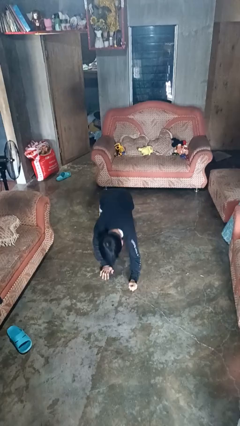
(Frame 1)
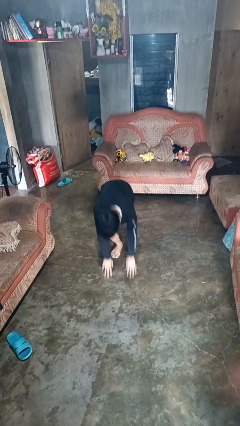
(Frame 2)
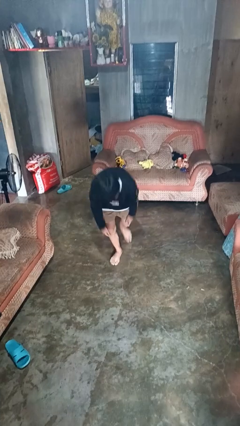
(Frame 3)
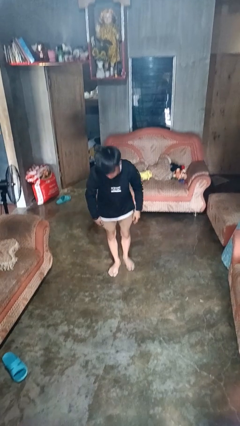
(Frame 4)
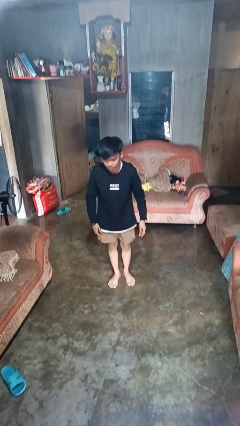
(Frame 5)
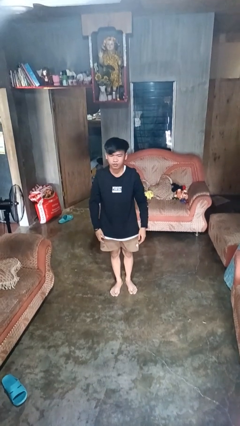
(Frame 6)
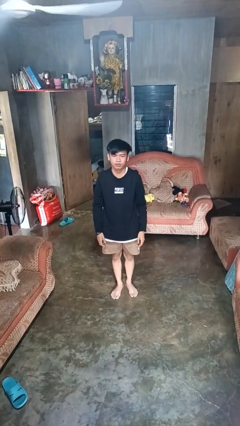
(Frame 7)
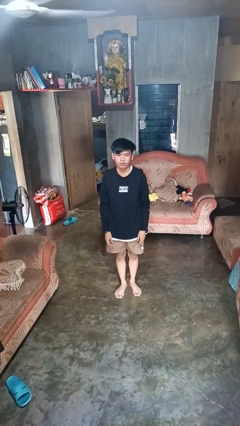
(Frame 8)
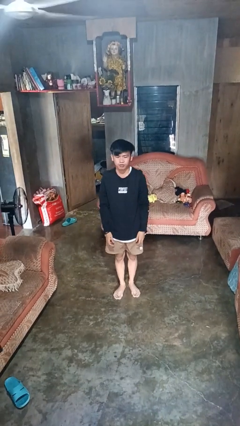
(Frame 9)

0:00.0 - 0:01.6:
person stands up from floor

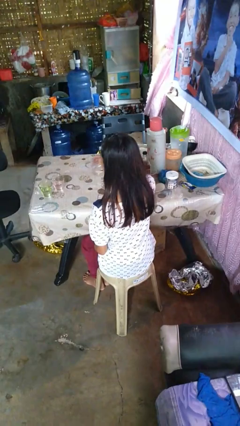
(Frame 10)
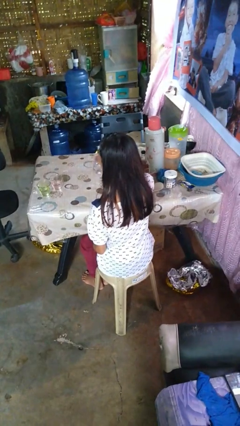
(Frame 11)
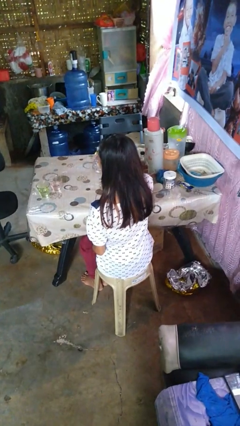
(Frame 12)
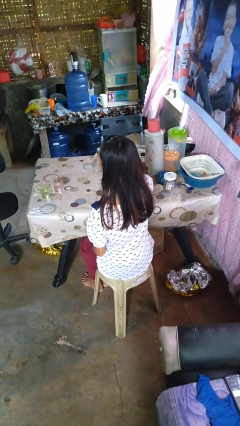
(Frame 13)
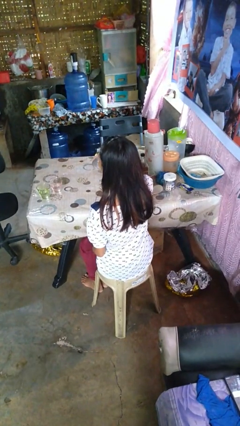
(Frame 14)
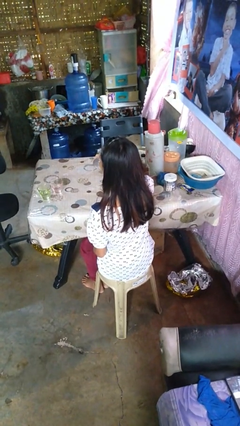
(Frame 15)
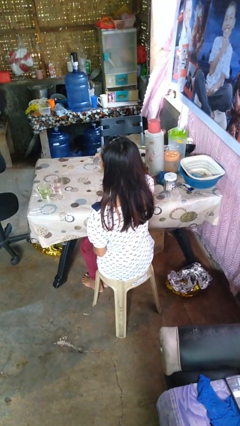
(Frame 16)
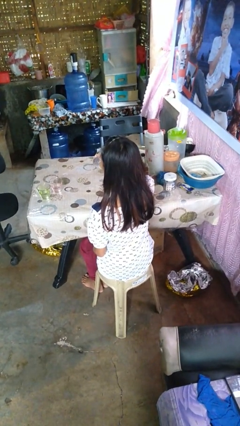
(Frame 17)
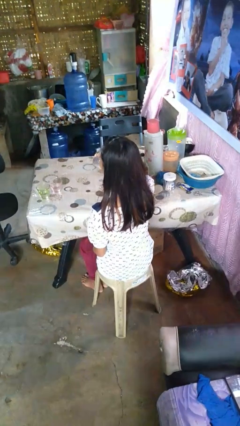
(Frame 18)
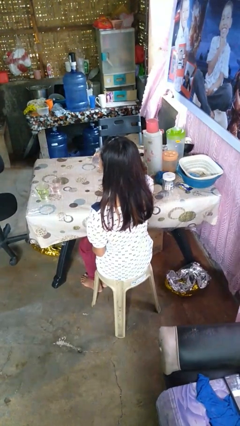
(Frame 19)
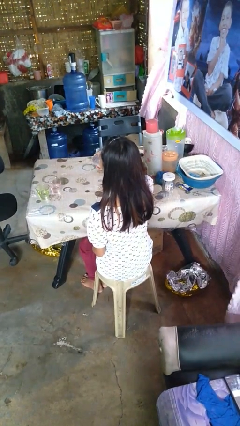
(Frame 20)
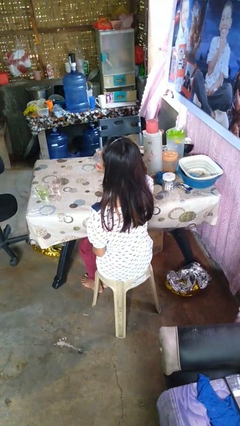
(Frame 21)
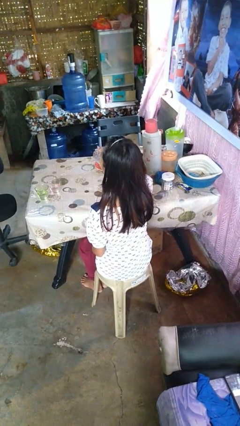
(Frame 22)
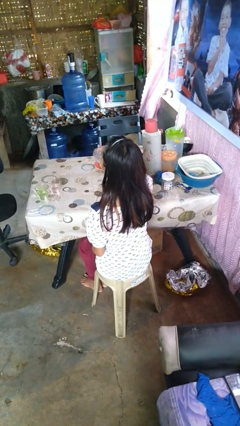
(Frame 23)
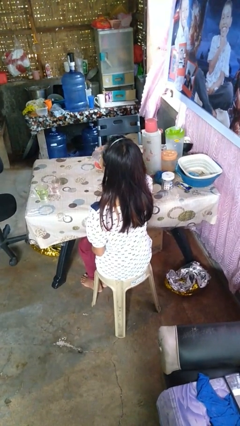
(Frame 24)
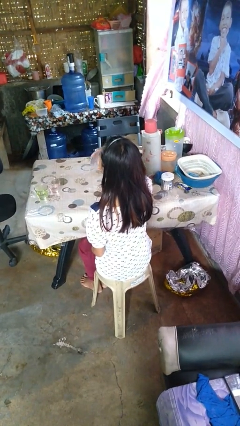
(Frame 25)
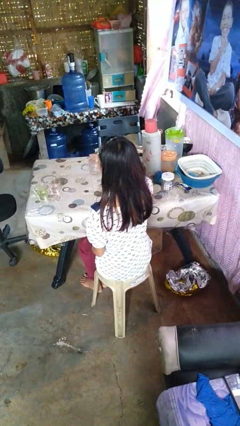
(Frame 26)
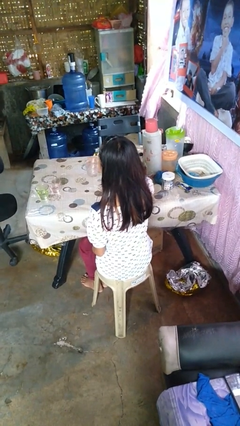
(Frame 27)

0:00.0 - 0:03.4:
person drinks from shotglass

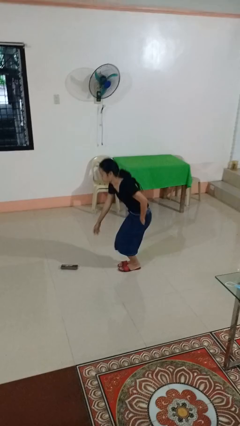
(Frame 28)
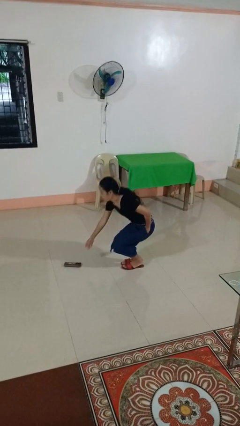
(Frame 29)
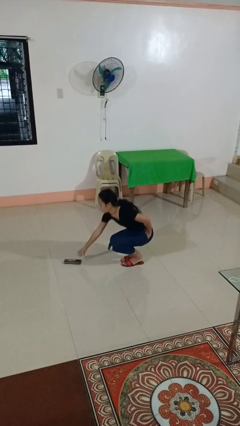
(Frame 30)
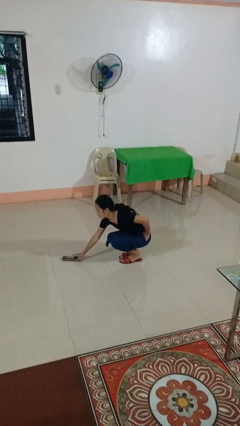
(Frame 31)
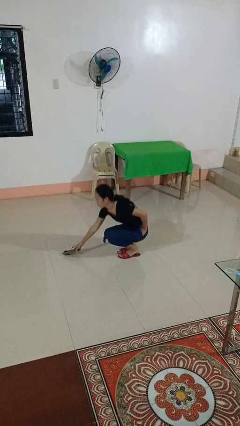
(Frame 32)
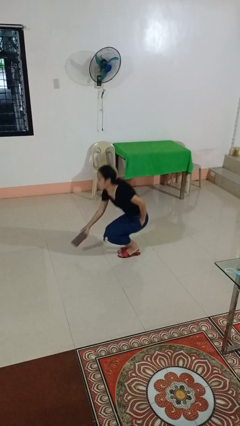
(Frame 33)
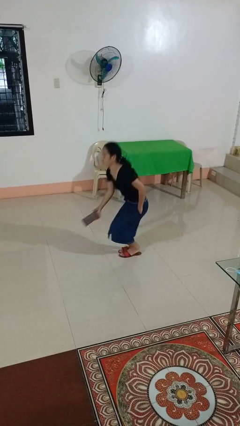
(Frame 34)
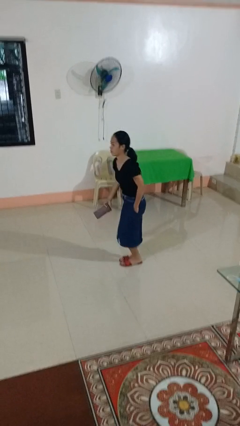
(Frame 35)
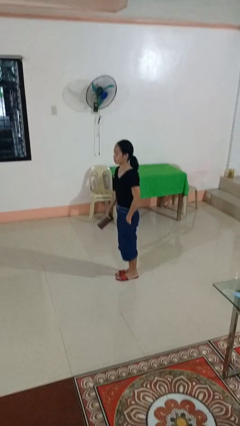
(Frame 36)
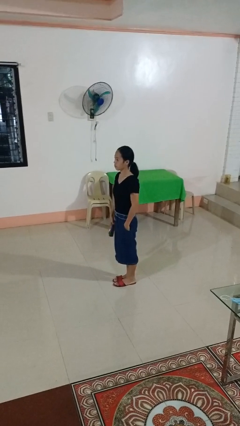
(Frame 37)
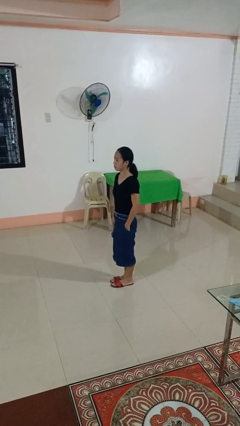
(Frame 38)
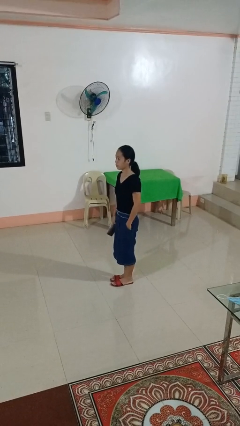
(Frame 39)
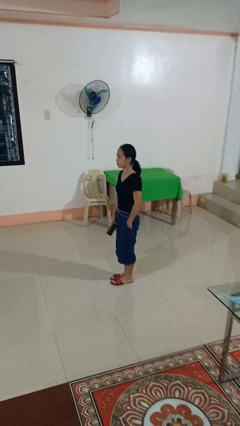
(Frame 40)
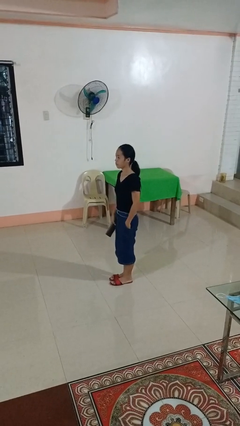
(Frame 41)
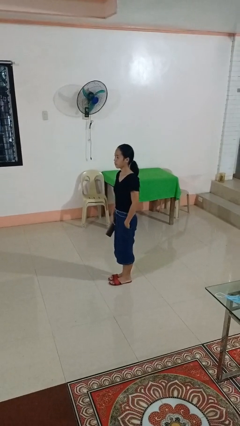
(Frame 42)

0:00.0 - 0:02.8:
person picks up object from floor

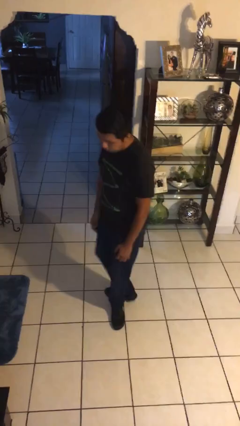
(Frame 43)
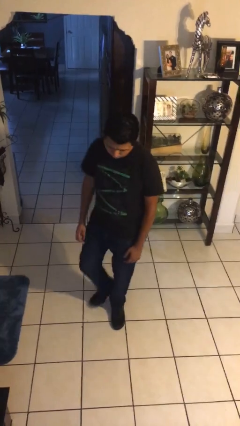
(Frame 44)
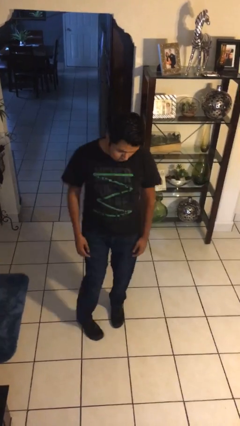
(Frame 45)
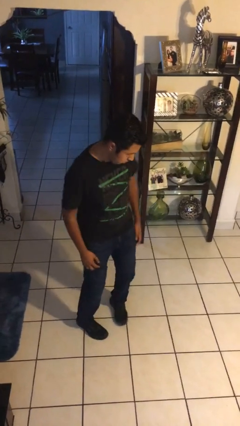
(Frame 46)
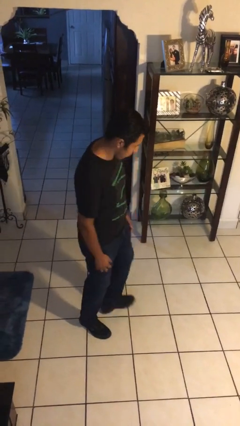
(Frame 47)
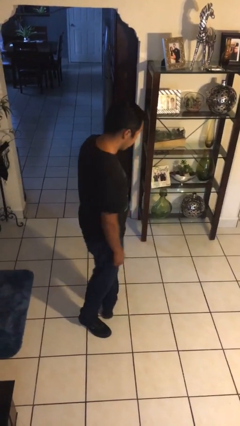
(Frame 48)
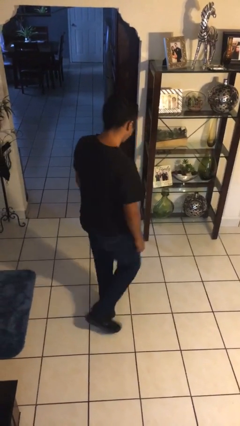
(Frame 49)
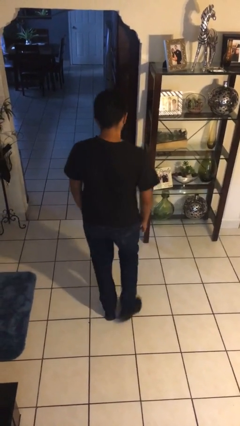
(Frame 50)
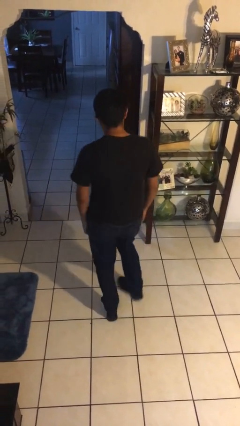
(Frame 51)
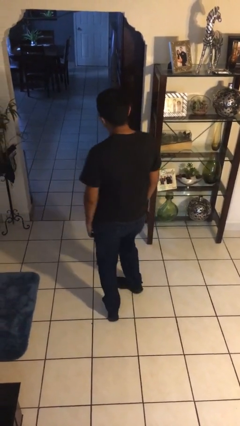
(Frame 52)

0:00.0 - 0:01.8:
person twirls

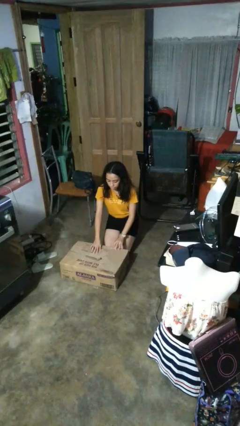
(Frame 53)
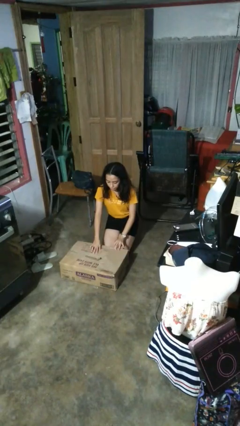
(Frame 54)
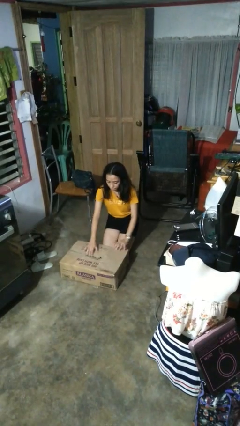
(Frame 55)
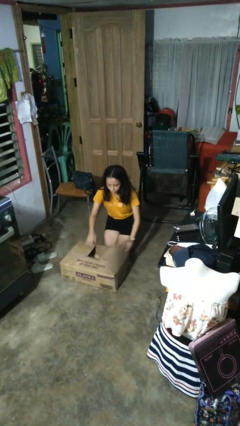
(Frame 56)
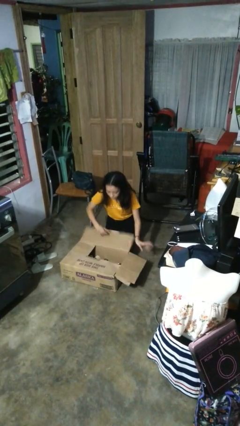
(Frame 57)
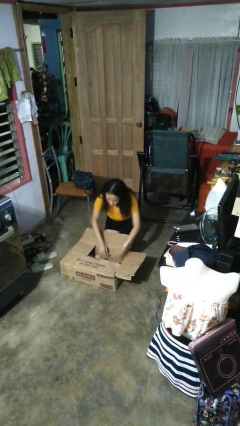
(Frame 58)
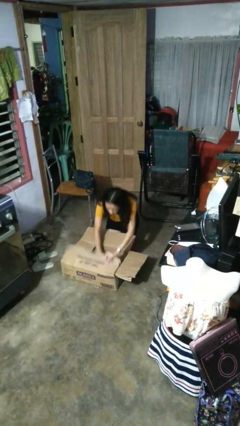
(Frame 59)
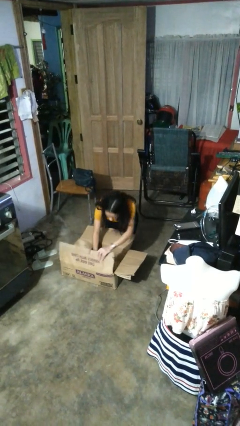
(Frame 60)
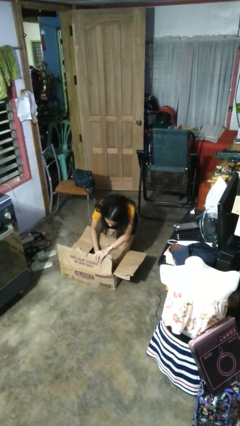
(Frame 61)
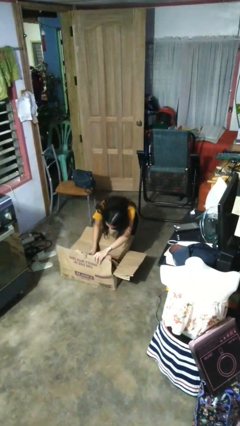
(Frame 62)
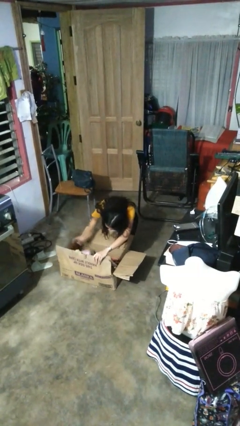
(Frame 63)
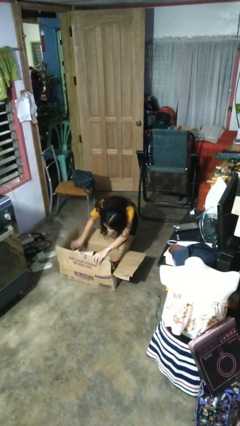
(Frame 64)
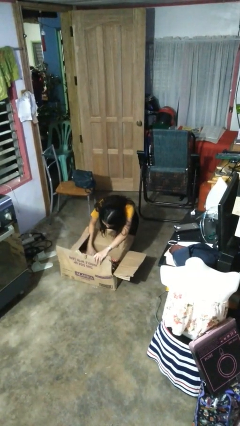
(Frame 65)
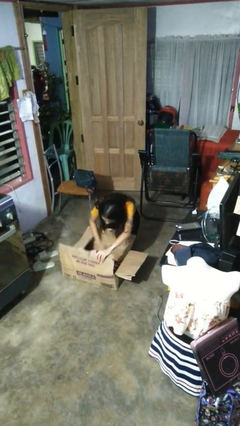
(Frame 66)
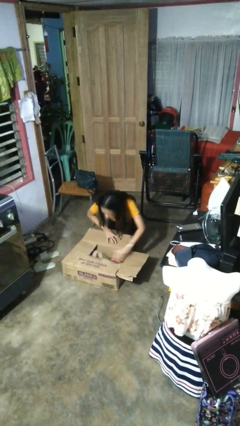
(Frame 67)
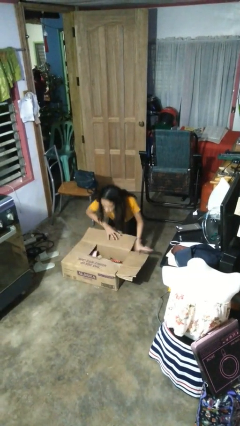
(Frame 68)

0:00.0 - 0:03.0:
person searches in box

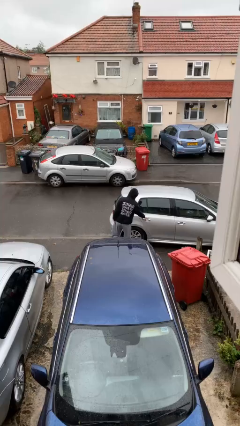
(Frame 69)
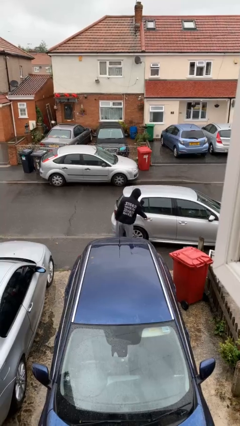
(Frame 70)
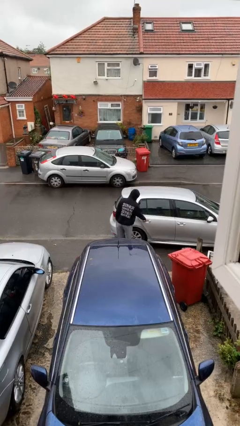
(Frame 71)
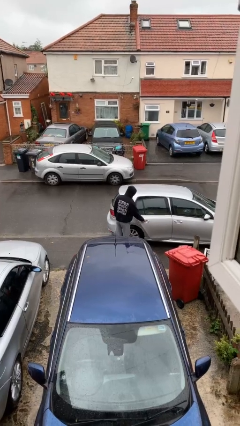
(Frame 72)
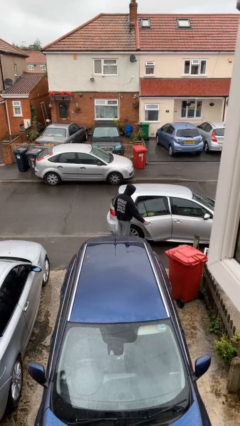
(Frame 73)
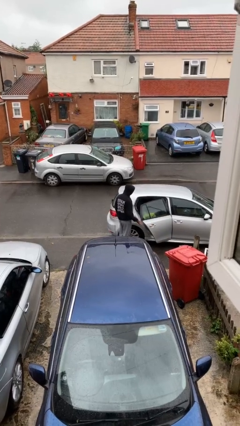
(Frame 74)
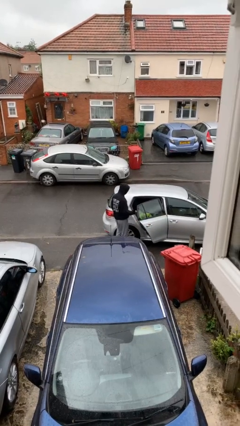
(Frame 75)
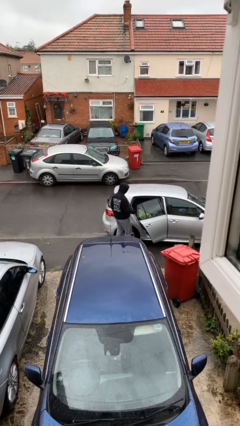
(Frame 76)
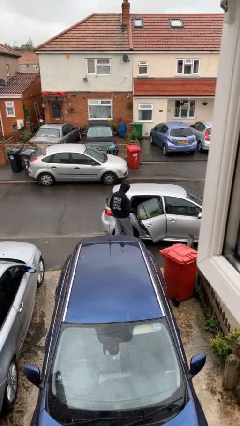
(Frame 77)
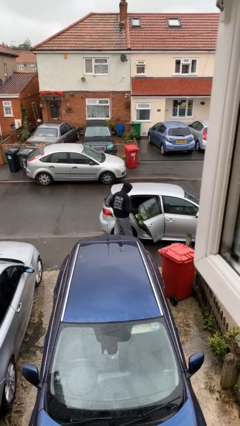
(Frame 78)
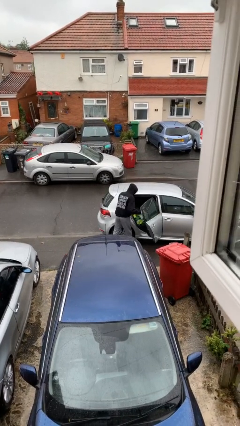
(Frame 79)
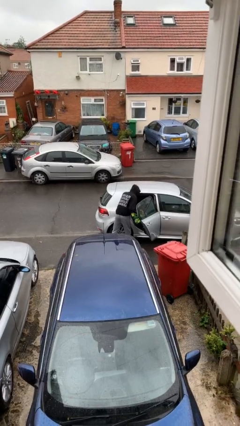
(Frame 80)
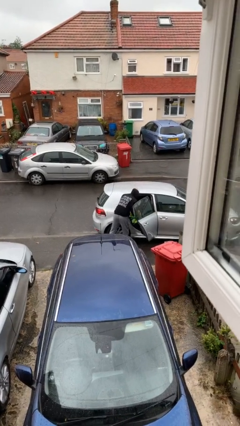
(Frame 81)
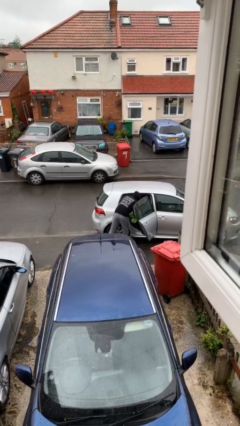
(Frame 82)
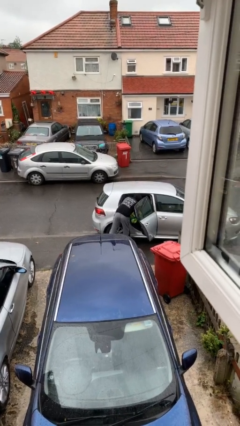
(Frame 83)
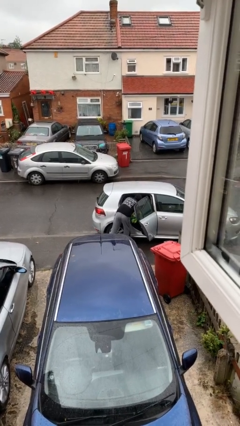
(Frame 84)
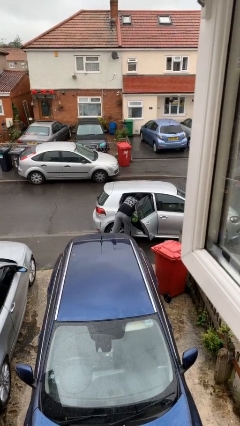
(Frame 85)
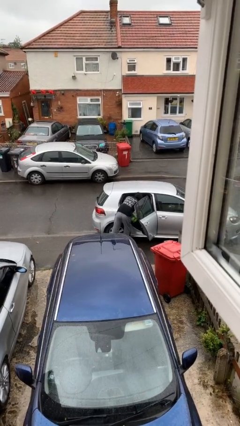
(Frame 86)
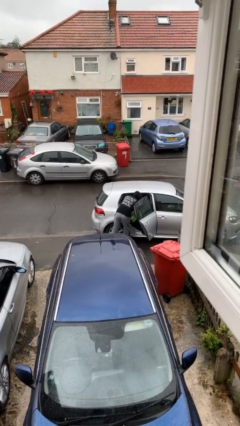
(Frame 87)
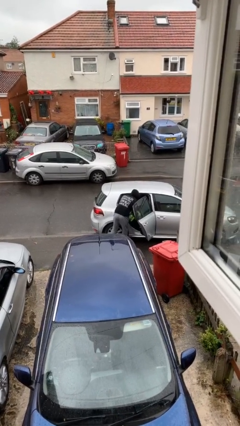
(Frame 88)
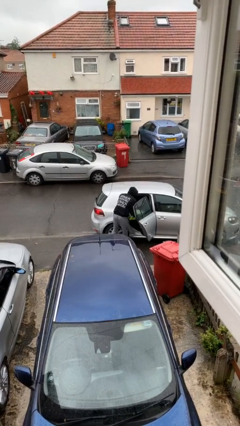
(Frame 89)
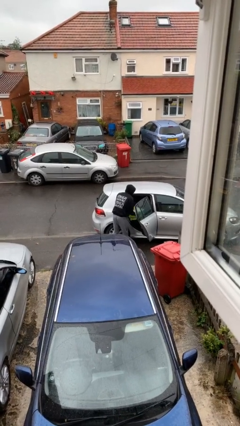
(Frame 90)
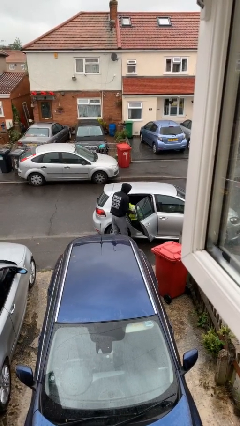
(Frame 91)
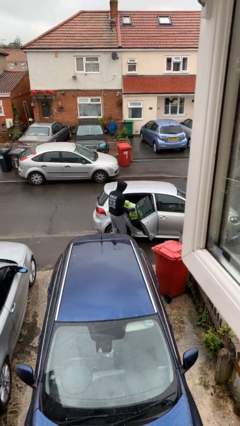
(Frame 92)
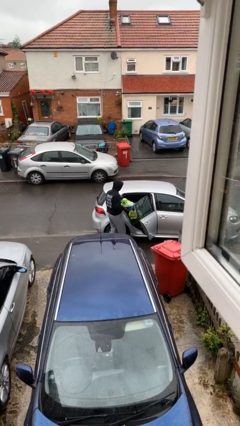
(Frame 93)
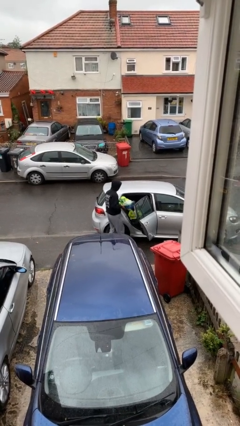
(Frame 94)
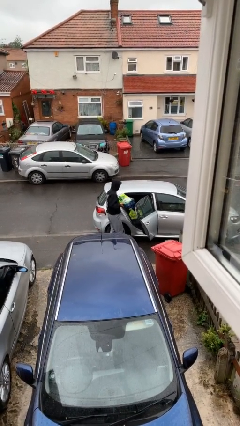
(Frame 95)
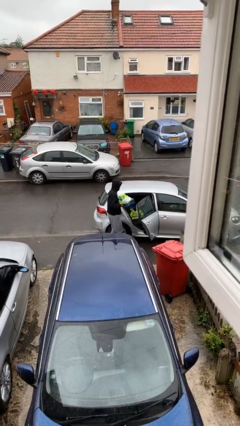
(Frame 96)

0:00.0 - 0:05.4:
person opens car door
